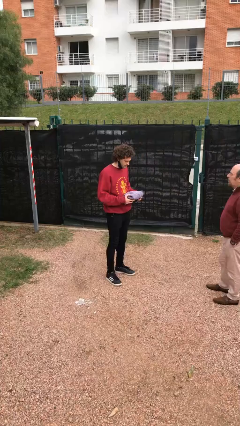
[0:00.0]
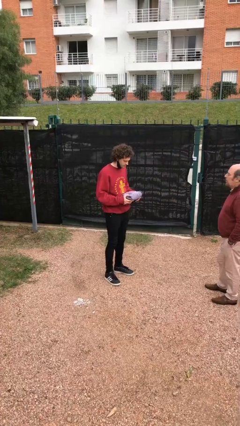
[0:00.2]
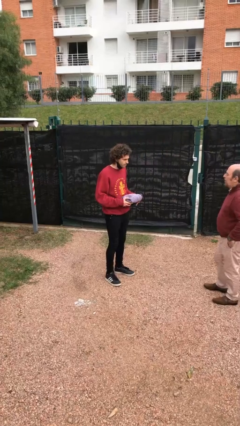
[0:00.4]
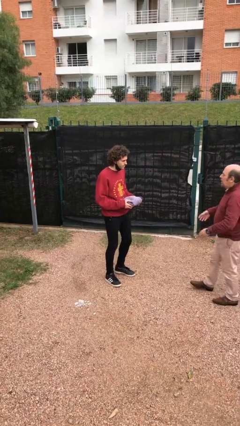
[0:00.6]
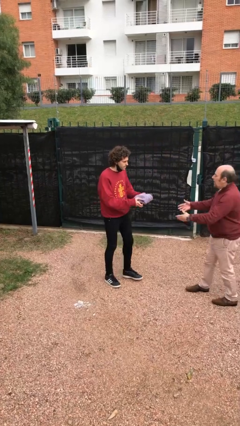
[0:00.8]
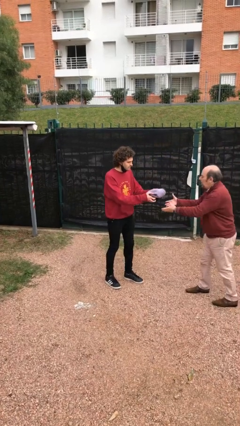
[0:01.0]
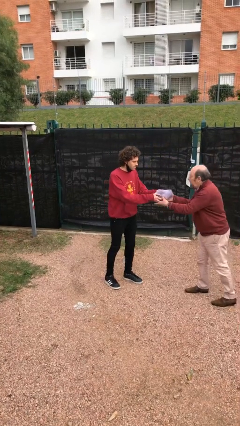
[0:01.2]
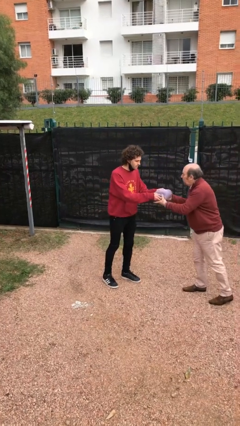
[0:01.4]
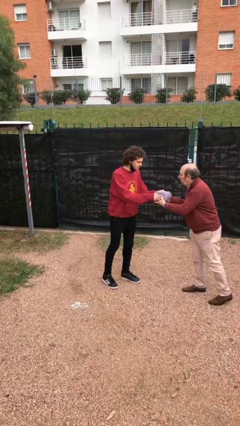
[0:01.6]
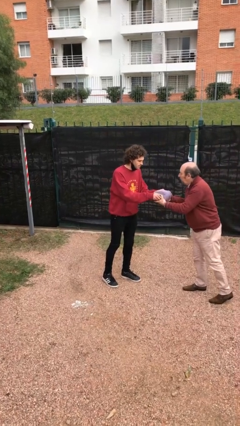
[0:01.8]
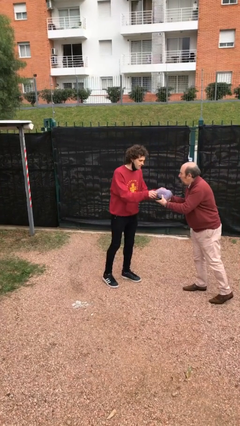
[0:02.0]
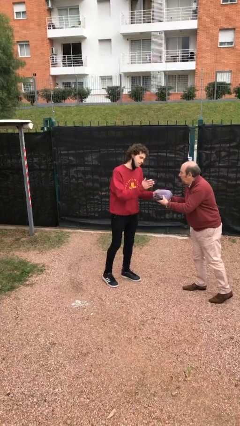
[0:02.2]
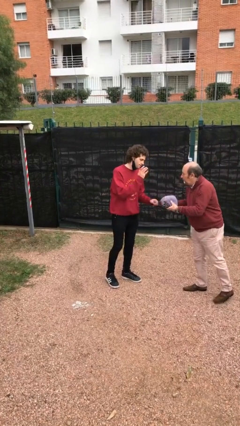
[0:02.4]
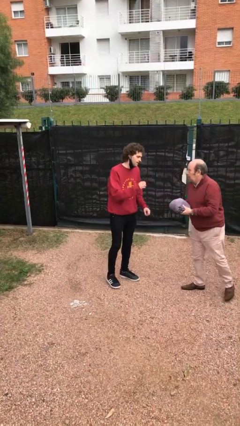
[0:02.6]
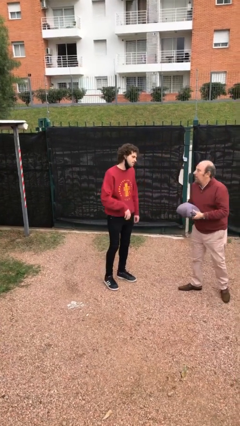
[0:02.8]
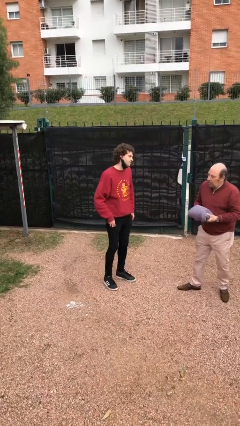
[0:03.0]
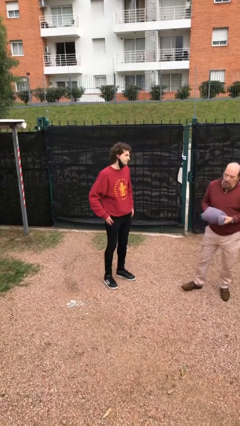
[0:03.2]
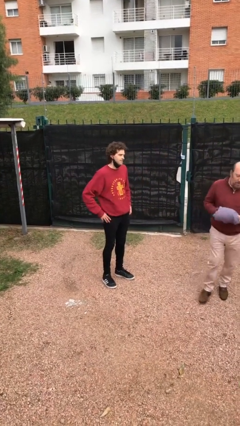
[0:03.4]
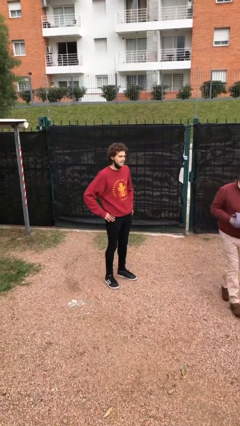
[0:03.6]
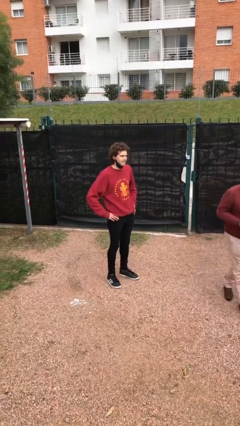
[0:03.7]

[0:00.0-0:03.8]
person transfers object to person

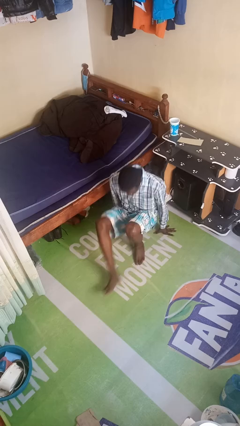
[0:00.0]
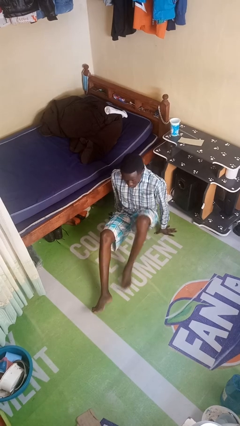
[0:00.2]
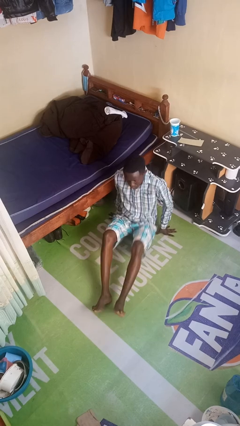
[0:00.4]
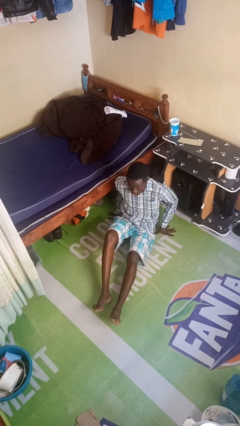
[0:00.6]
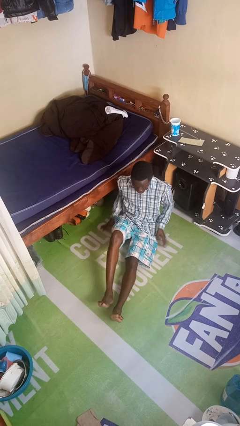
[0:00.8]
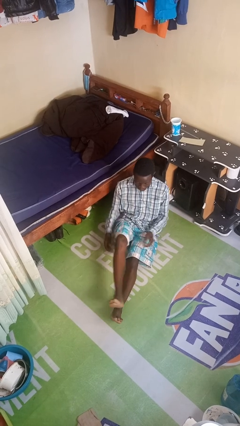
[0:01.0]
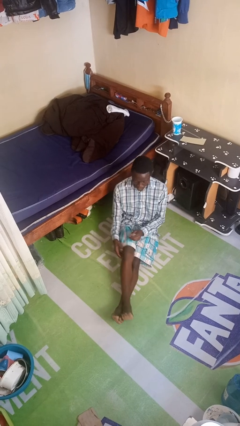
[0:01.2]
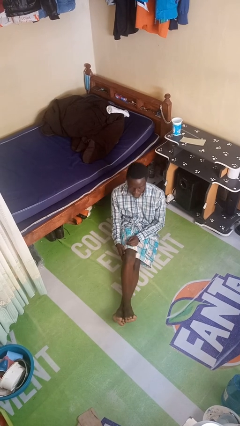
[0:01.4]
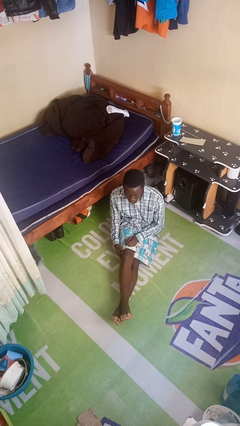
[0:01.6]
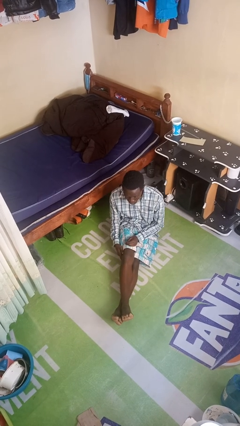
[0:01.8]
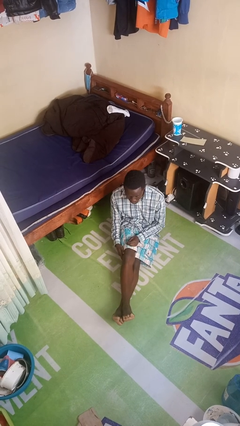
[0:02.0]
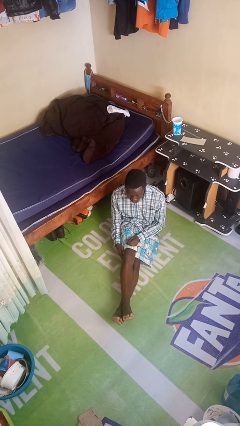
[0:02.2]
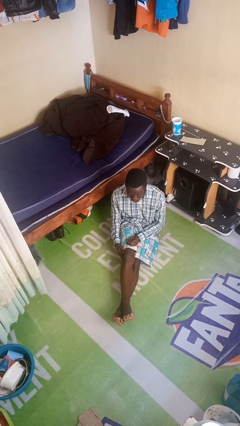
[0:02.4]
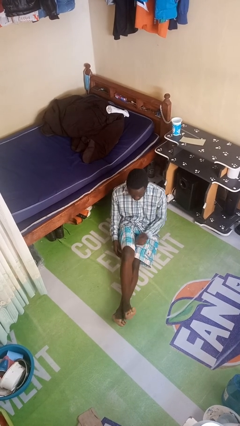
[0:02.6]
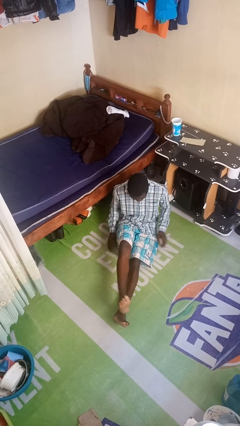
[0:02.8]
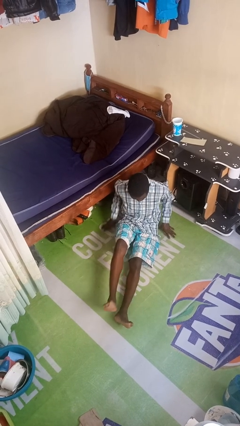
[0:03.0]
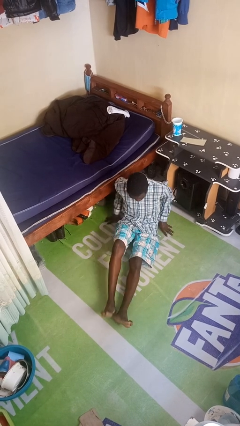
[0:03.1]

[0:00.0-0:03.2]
person sits crisscross

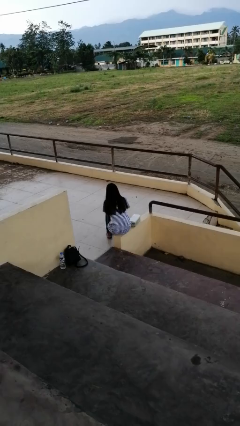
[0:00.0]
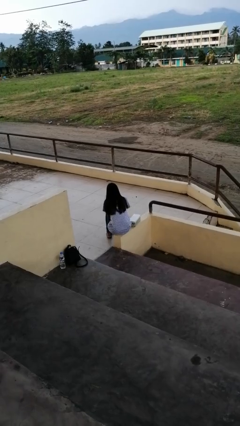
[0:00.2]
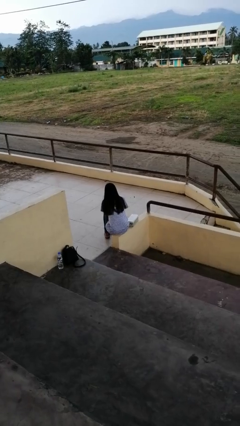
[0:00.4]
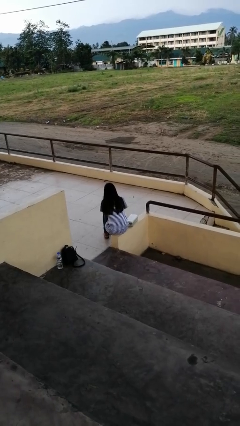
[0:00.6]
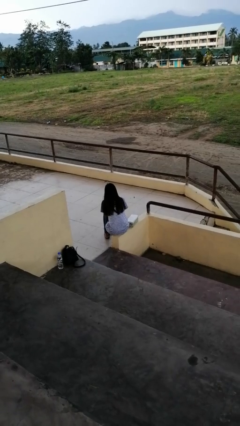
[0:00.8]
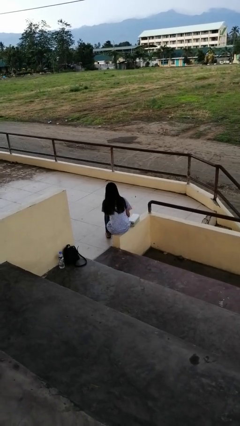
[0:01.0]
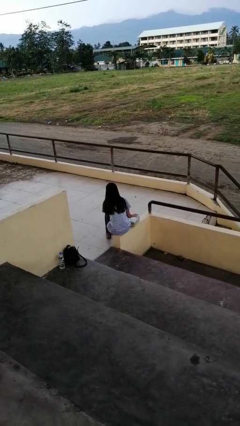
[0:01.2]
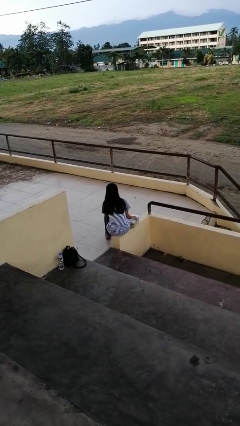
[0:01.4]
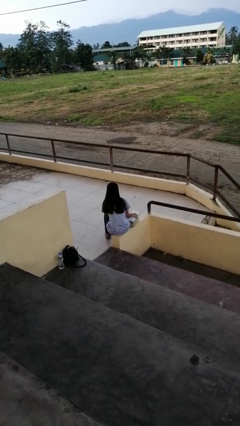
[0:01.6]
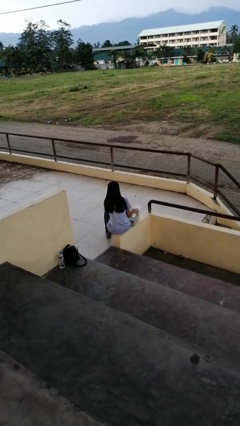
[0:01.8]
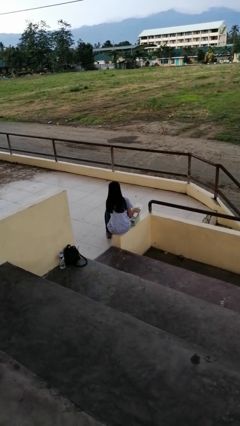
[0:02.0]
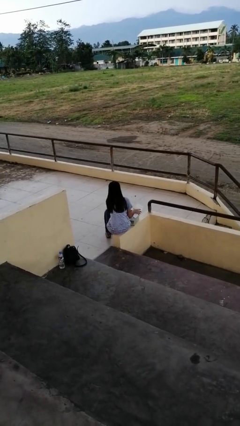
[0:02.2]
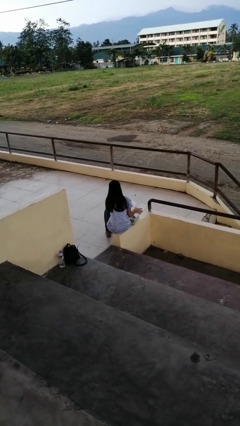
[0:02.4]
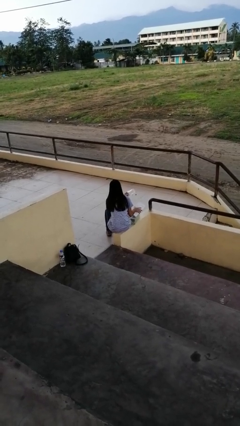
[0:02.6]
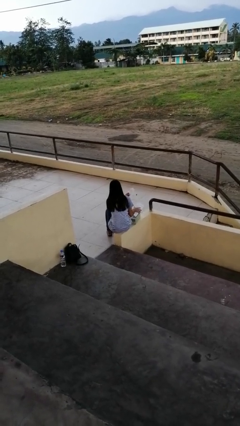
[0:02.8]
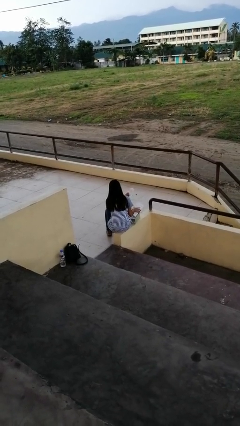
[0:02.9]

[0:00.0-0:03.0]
person takes object from box

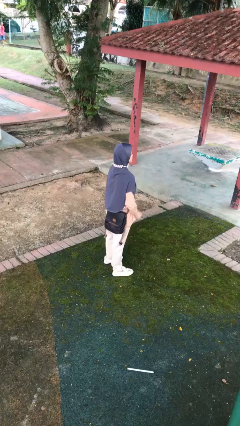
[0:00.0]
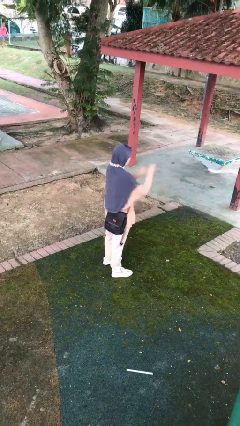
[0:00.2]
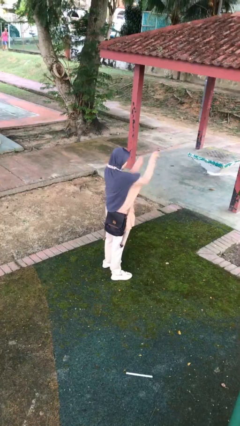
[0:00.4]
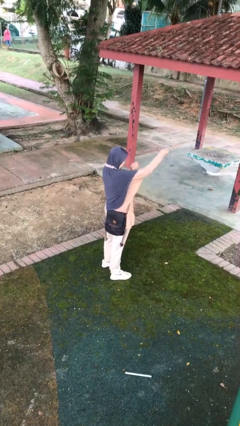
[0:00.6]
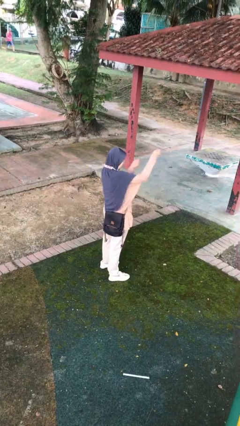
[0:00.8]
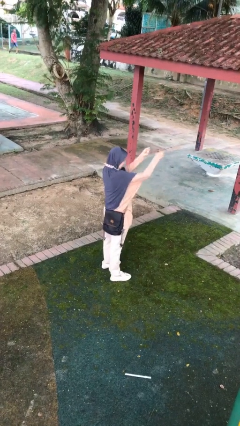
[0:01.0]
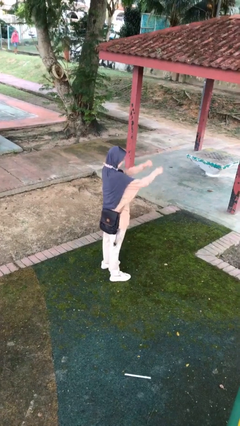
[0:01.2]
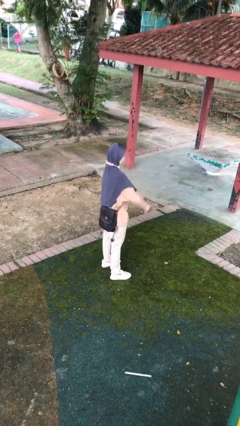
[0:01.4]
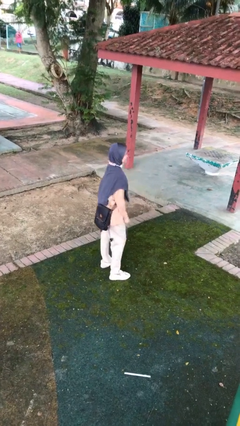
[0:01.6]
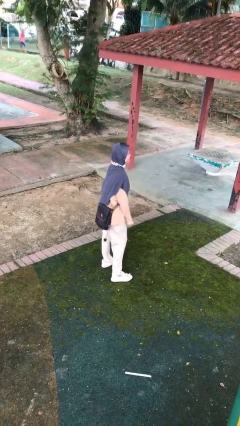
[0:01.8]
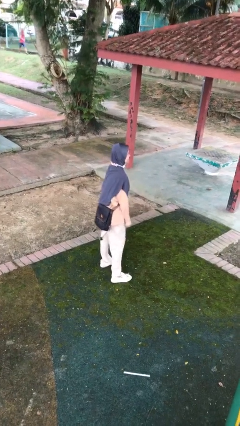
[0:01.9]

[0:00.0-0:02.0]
person punches

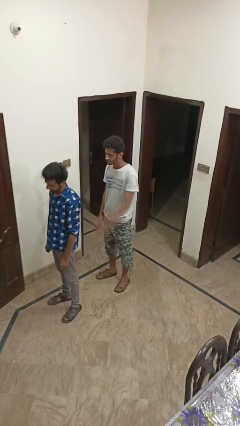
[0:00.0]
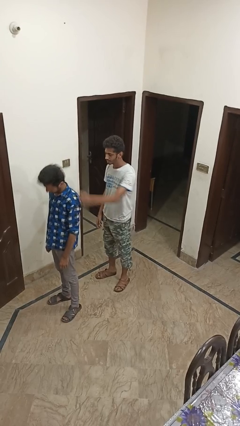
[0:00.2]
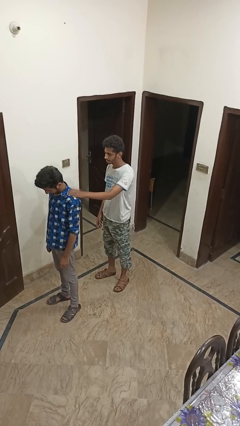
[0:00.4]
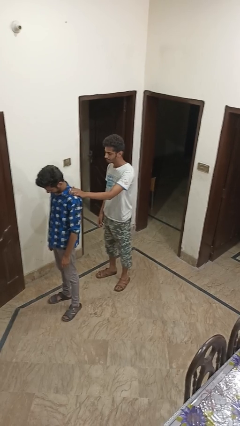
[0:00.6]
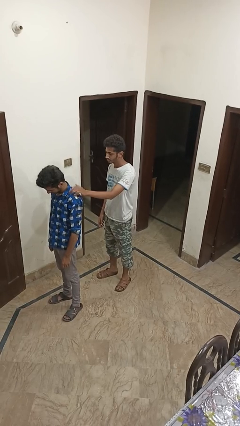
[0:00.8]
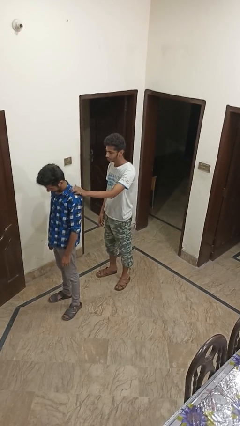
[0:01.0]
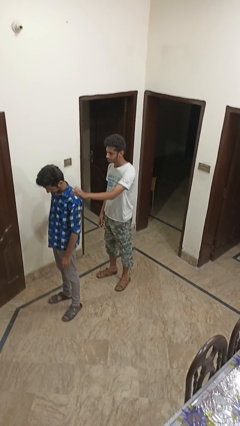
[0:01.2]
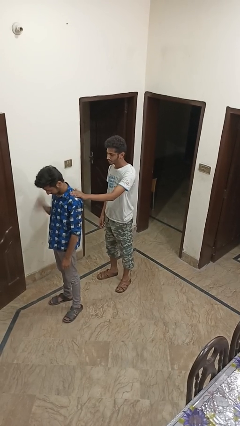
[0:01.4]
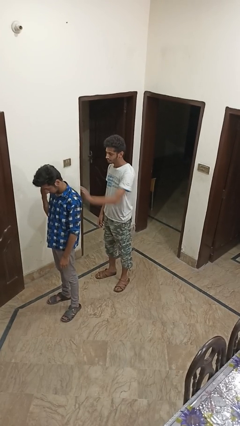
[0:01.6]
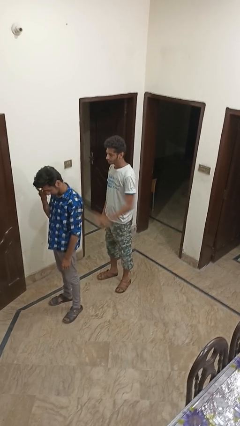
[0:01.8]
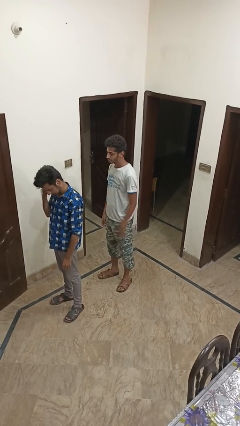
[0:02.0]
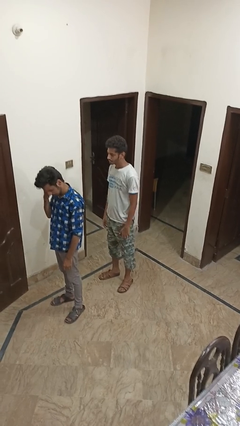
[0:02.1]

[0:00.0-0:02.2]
person touches back of person

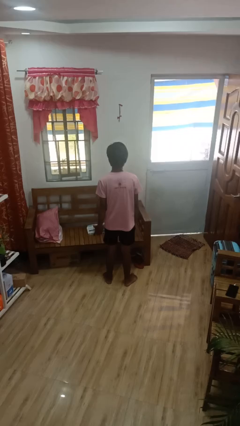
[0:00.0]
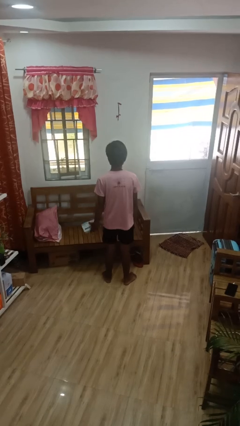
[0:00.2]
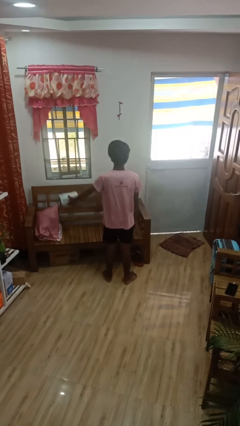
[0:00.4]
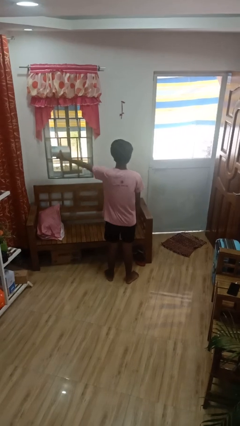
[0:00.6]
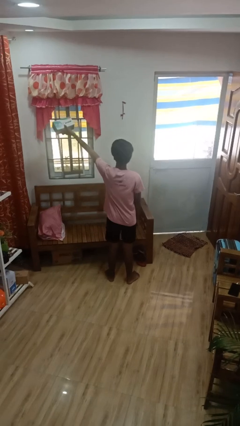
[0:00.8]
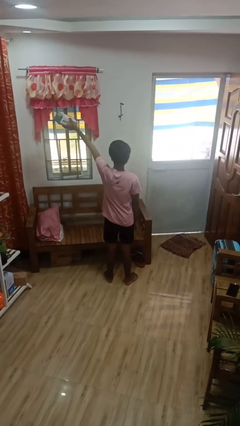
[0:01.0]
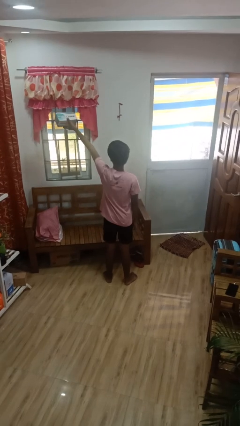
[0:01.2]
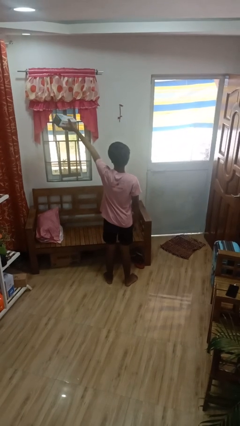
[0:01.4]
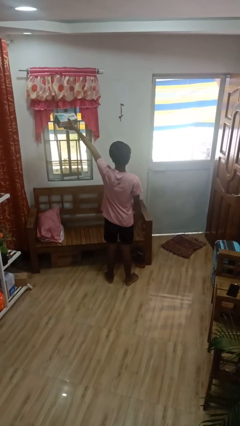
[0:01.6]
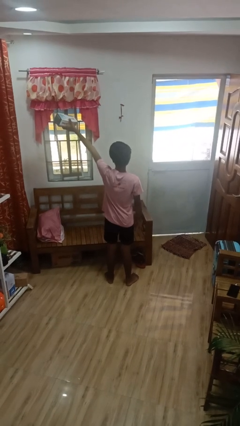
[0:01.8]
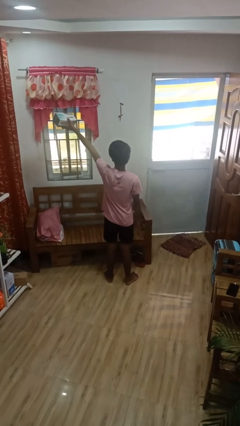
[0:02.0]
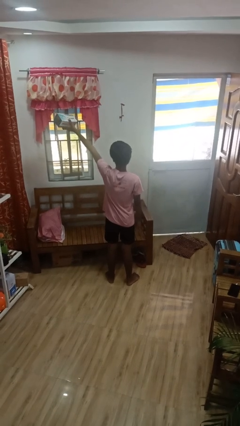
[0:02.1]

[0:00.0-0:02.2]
person holds object above head

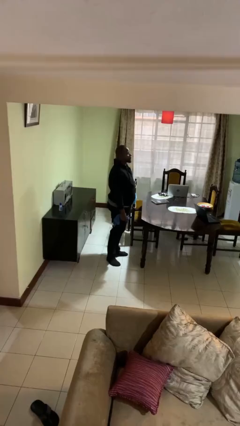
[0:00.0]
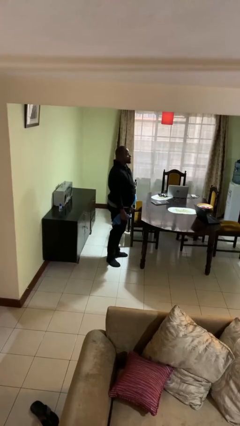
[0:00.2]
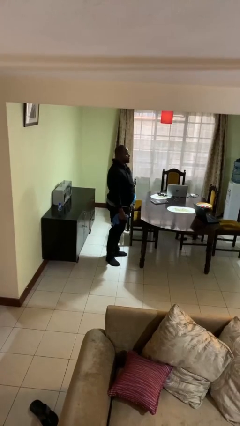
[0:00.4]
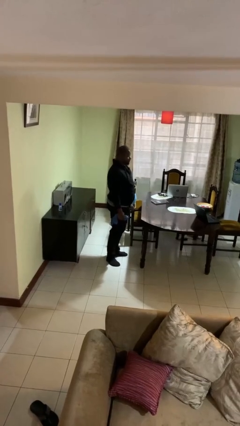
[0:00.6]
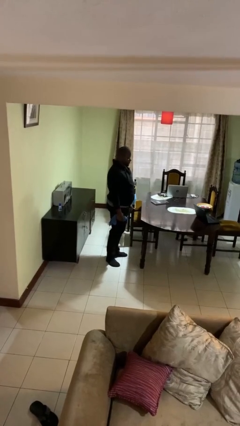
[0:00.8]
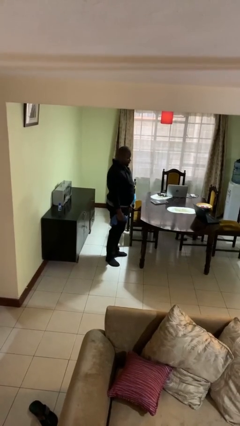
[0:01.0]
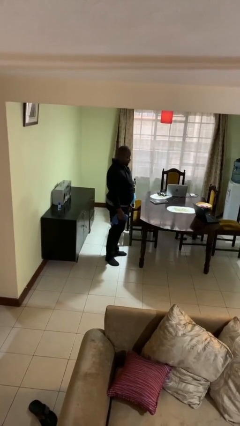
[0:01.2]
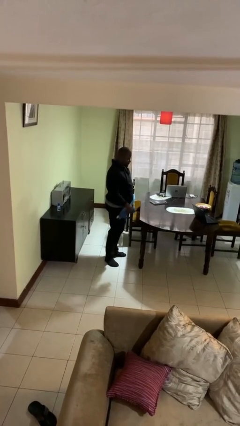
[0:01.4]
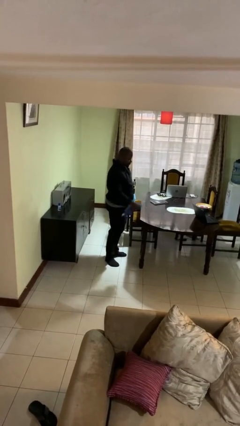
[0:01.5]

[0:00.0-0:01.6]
person cleans table with rag
